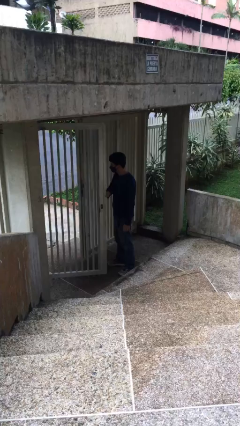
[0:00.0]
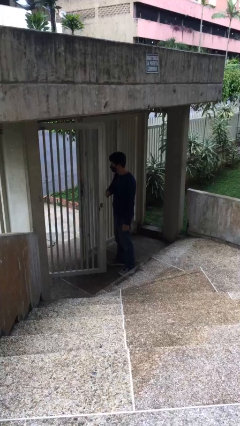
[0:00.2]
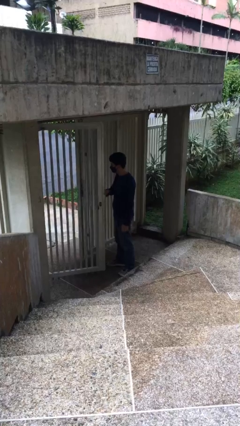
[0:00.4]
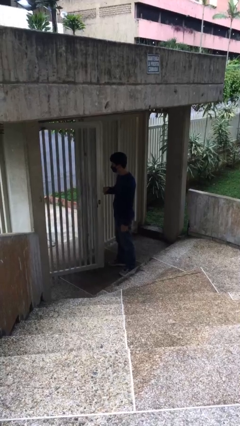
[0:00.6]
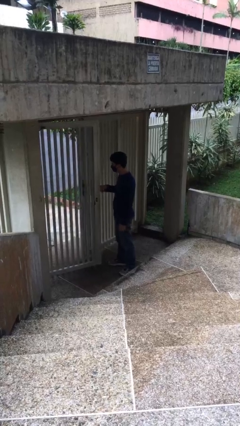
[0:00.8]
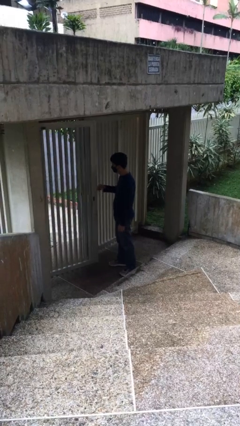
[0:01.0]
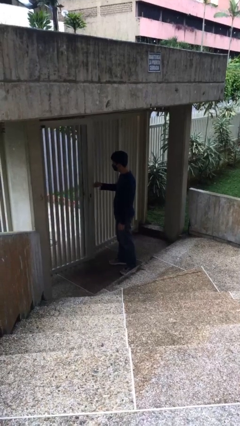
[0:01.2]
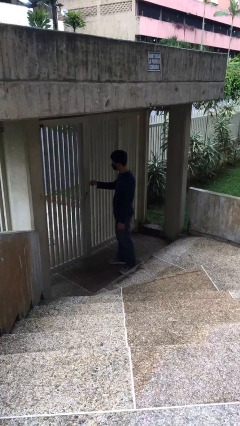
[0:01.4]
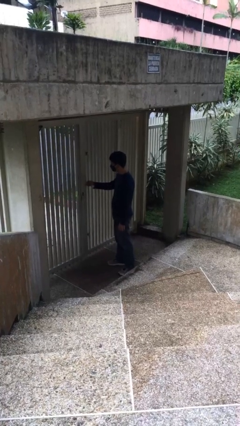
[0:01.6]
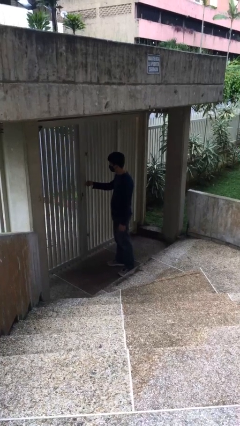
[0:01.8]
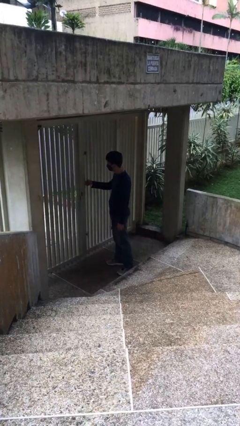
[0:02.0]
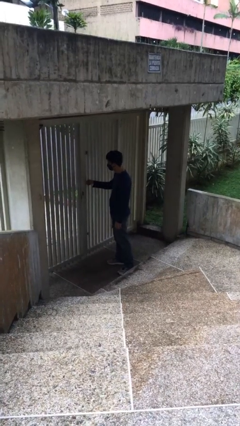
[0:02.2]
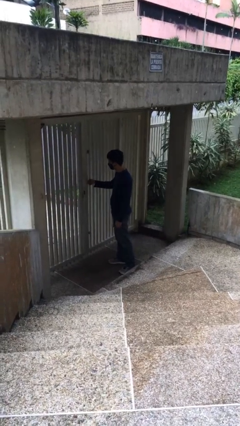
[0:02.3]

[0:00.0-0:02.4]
person closes facility door

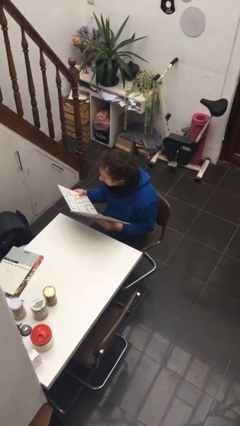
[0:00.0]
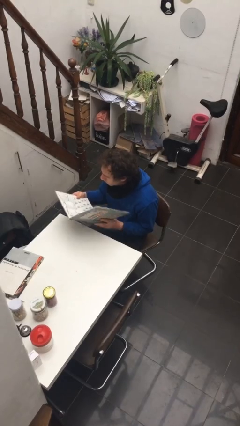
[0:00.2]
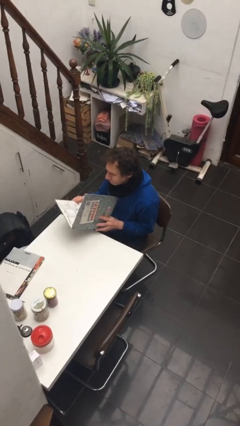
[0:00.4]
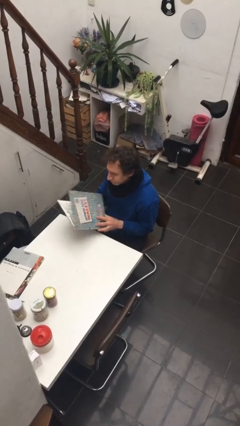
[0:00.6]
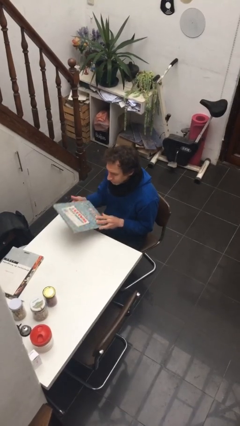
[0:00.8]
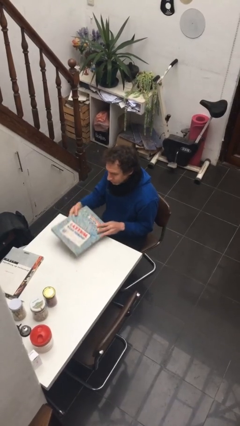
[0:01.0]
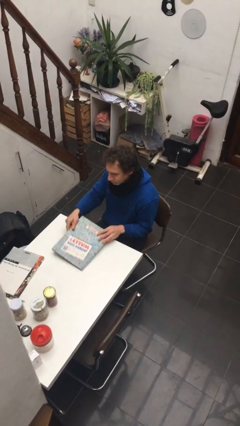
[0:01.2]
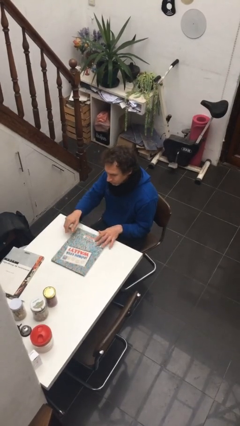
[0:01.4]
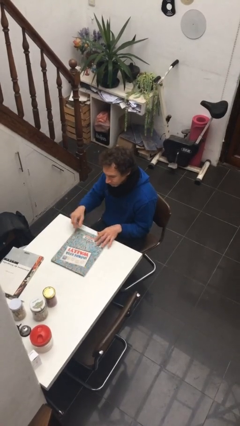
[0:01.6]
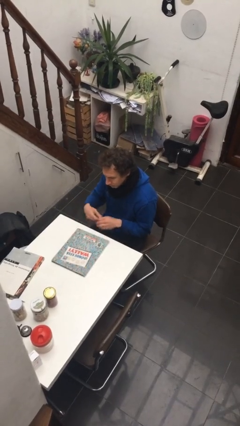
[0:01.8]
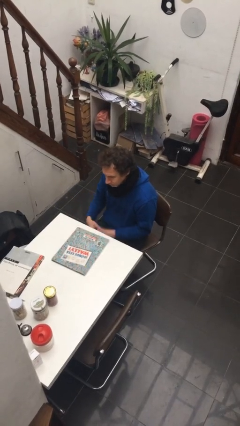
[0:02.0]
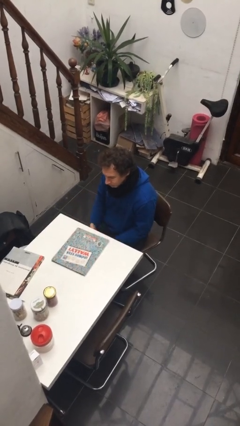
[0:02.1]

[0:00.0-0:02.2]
person puts down object on table

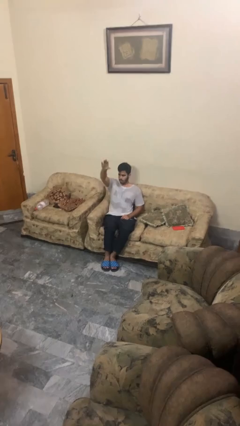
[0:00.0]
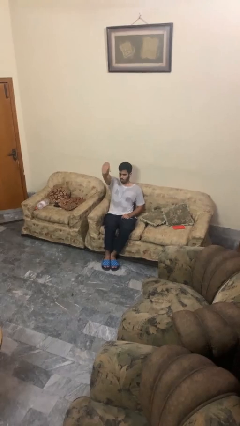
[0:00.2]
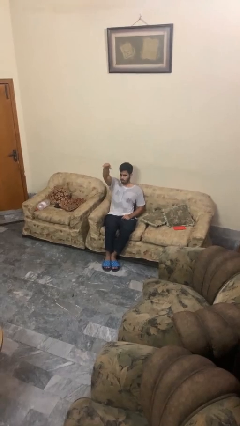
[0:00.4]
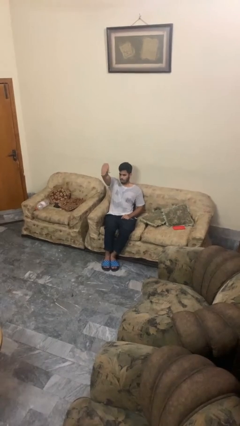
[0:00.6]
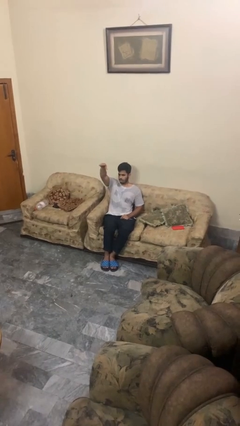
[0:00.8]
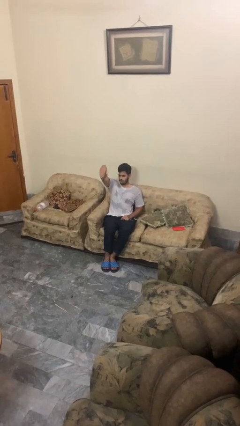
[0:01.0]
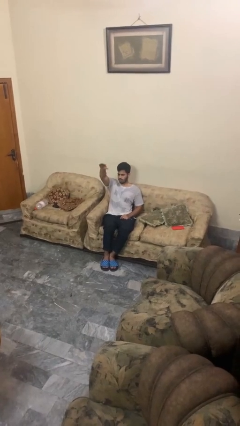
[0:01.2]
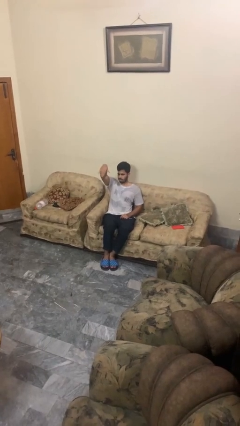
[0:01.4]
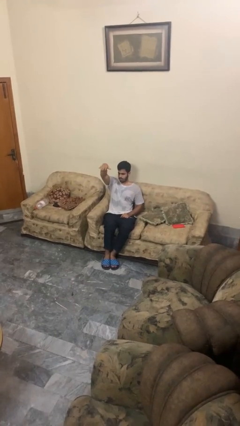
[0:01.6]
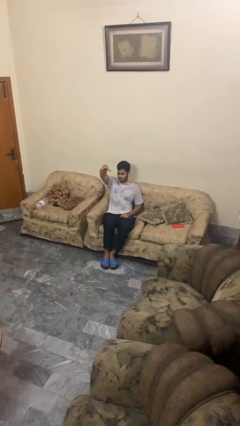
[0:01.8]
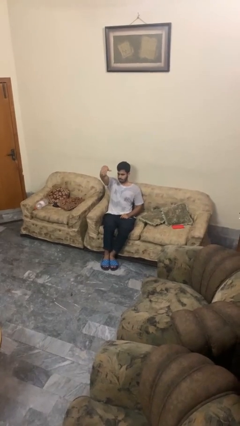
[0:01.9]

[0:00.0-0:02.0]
person gestures come here

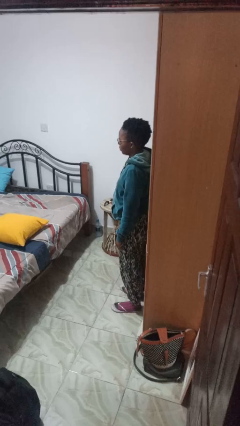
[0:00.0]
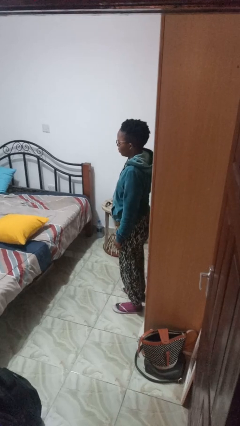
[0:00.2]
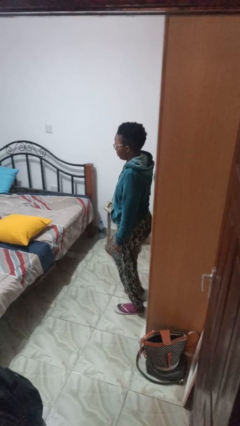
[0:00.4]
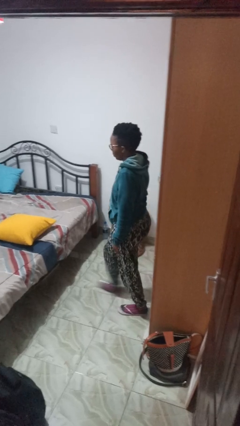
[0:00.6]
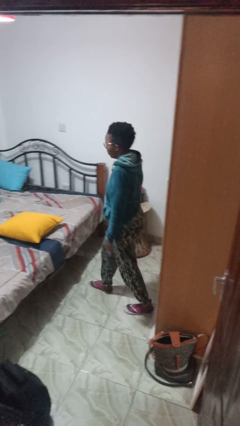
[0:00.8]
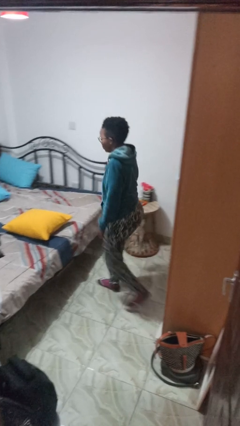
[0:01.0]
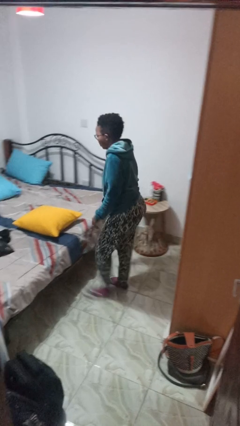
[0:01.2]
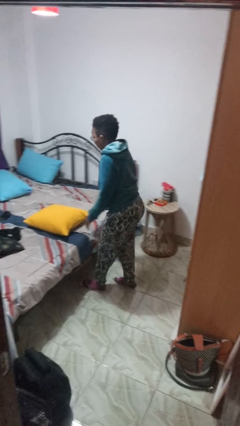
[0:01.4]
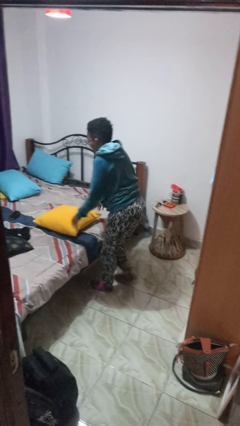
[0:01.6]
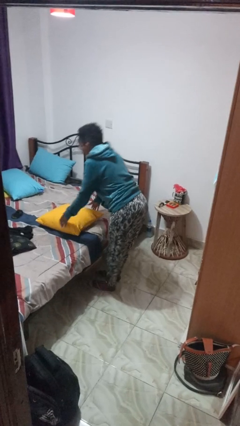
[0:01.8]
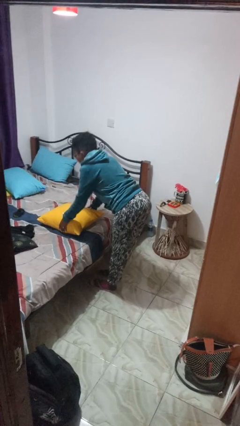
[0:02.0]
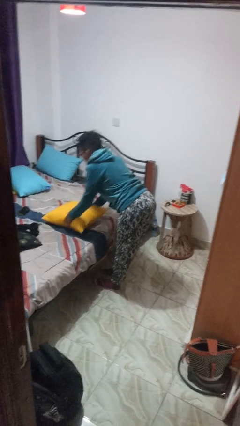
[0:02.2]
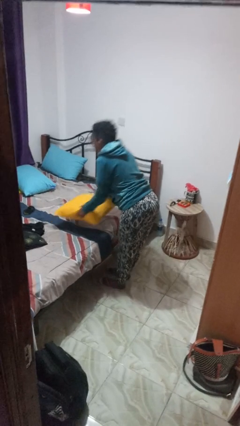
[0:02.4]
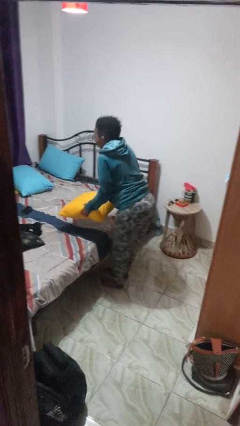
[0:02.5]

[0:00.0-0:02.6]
person picks up object from bed

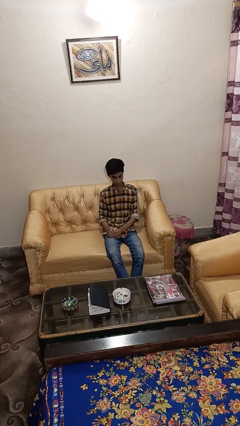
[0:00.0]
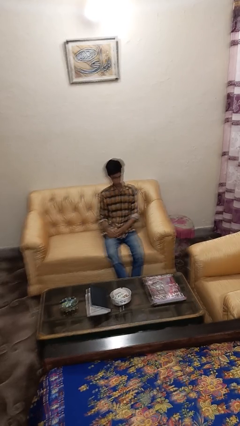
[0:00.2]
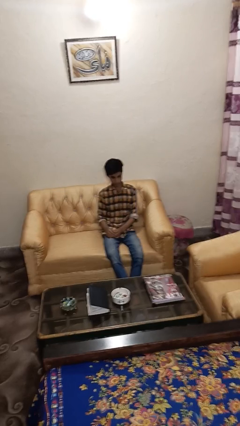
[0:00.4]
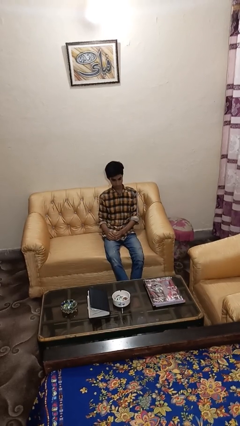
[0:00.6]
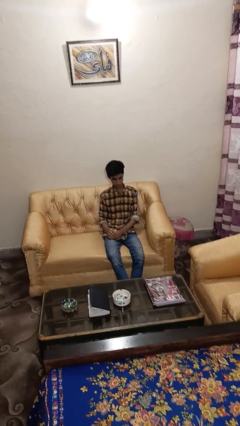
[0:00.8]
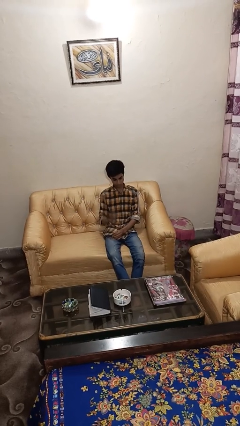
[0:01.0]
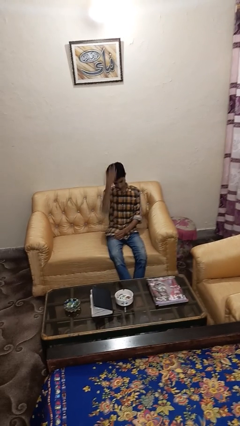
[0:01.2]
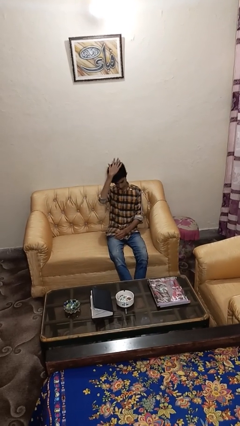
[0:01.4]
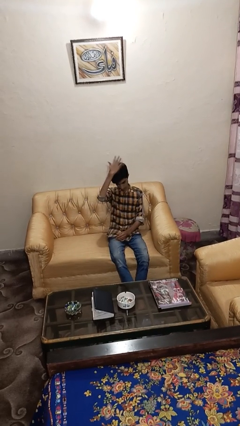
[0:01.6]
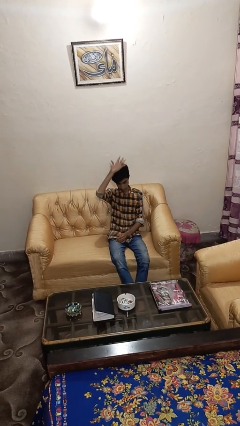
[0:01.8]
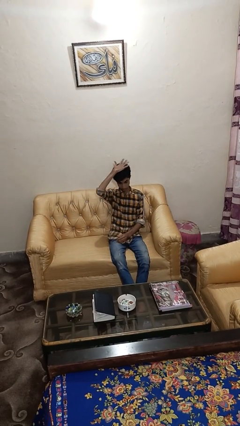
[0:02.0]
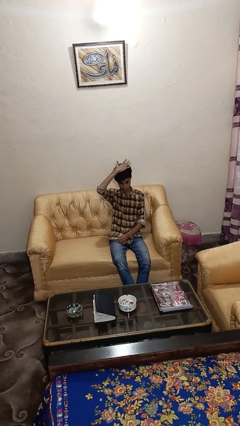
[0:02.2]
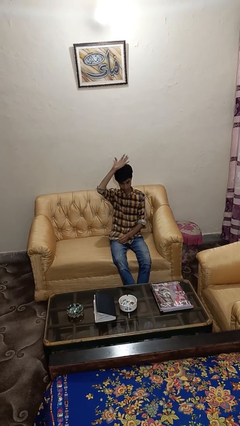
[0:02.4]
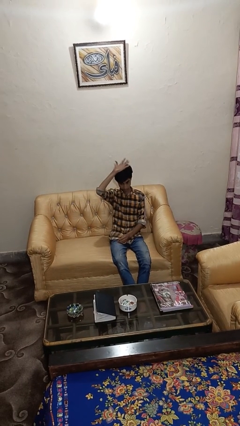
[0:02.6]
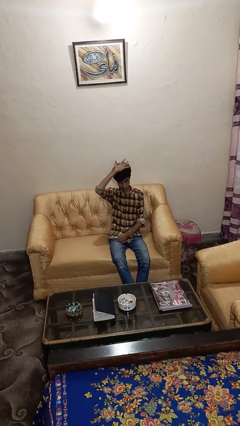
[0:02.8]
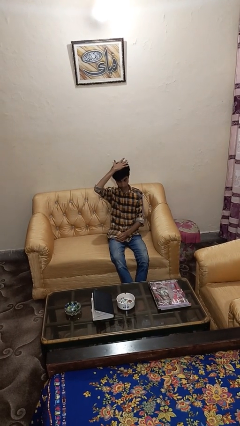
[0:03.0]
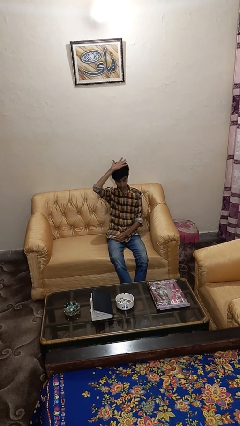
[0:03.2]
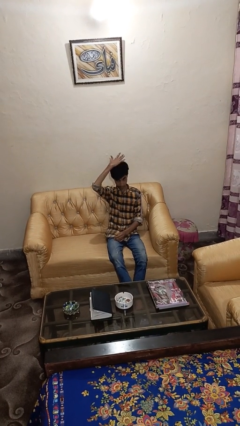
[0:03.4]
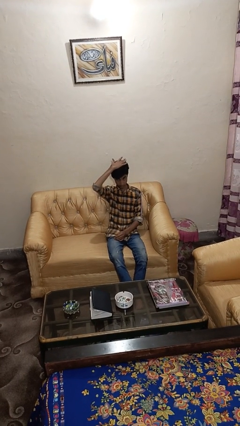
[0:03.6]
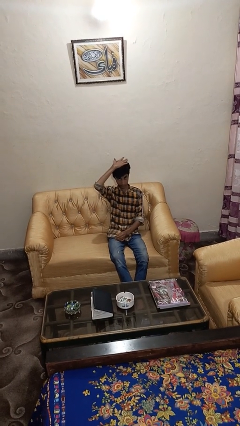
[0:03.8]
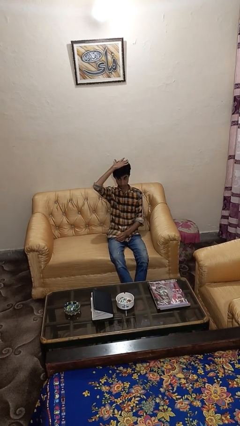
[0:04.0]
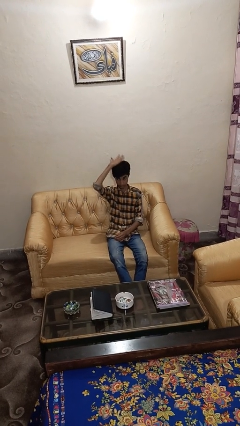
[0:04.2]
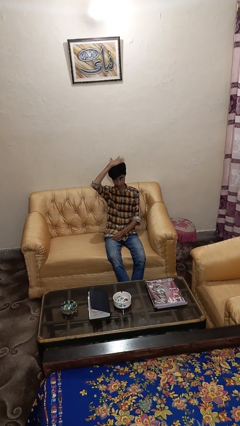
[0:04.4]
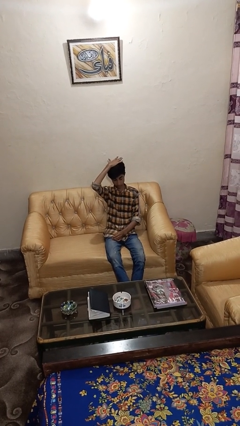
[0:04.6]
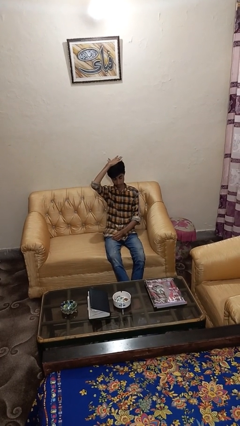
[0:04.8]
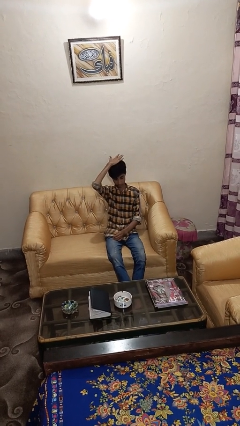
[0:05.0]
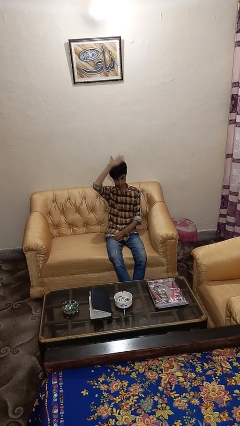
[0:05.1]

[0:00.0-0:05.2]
person pats head

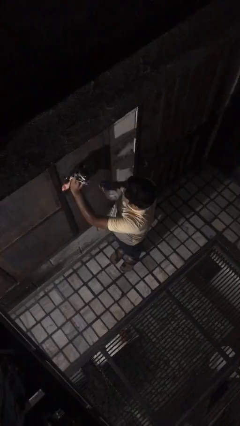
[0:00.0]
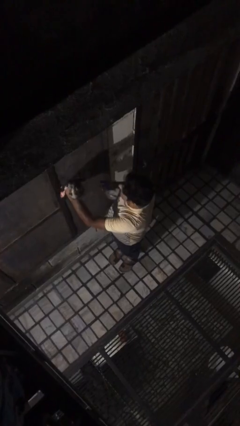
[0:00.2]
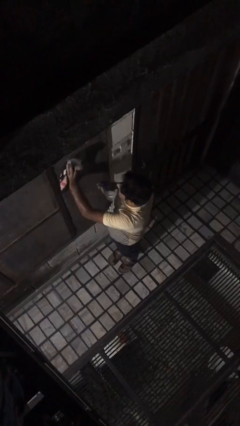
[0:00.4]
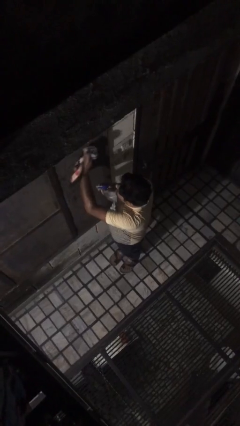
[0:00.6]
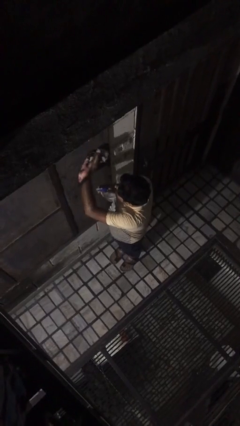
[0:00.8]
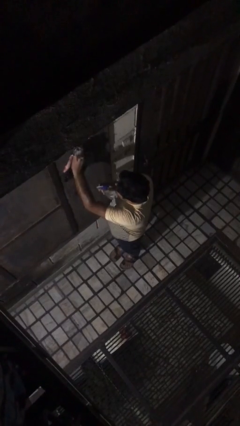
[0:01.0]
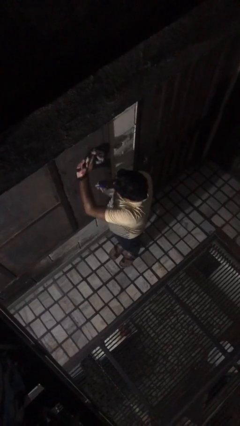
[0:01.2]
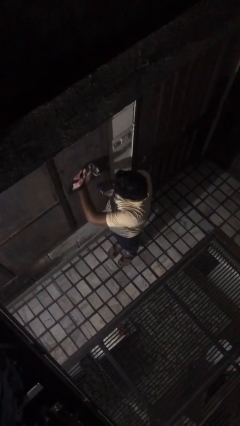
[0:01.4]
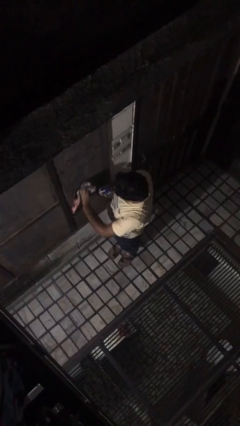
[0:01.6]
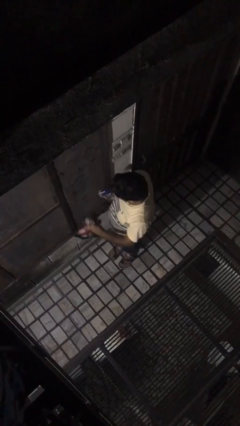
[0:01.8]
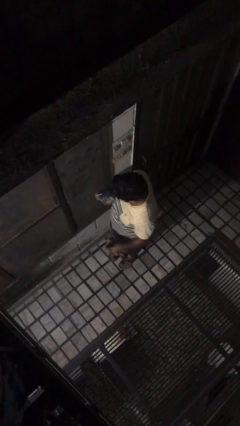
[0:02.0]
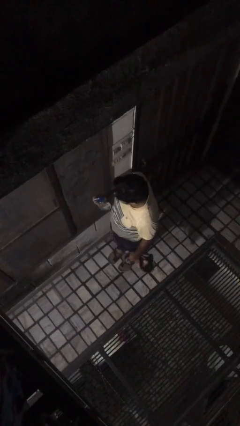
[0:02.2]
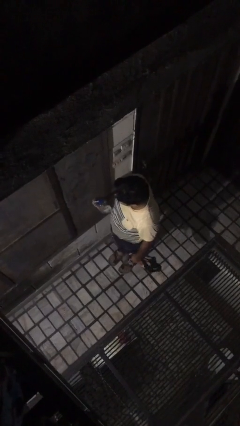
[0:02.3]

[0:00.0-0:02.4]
person washes window

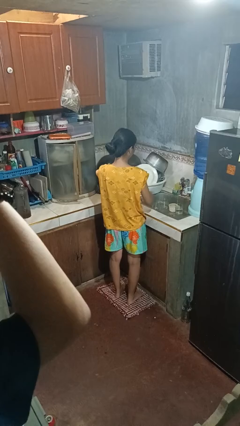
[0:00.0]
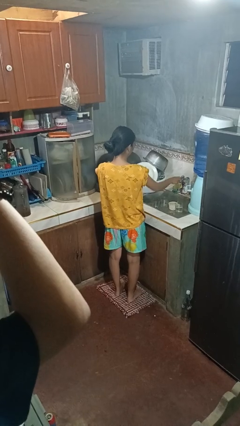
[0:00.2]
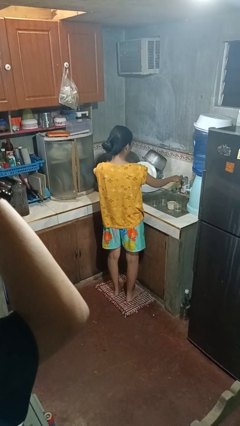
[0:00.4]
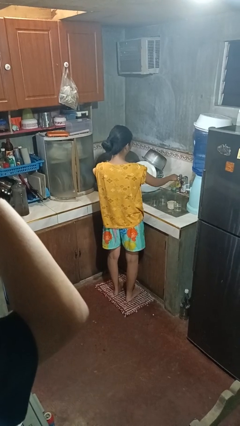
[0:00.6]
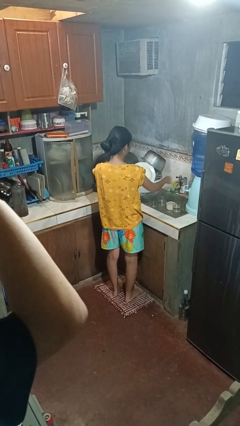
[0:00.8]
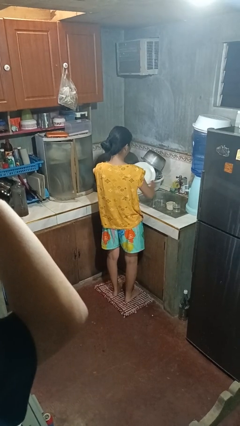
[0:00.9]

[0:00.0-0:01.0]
person turns off faucet
